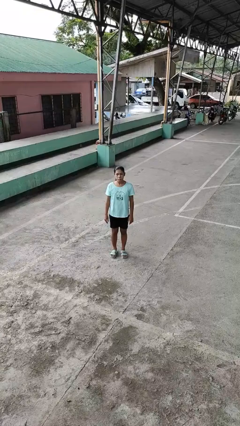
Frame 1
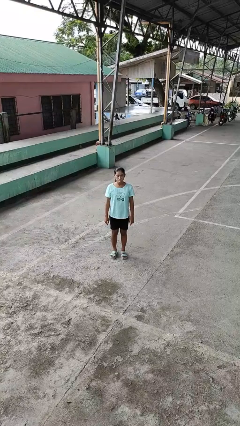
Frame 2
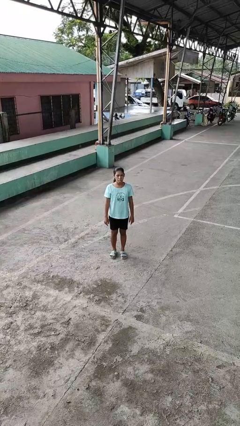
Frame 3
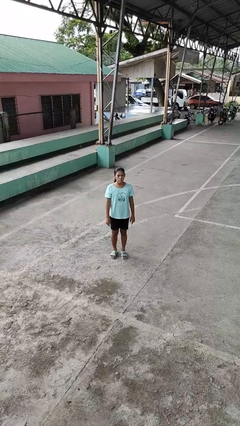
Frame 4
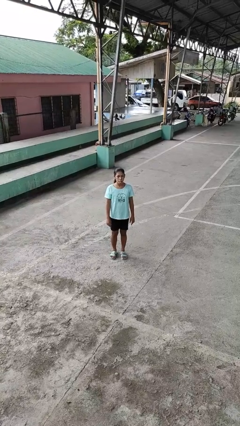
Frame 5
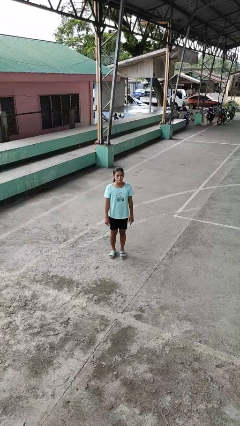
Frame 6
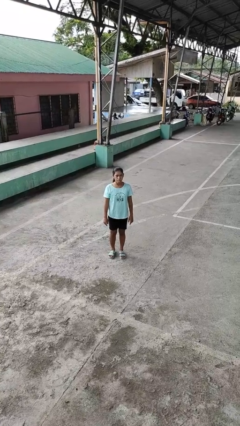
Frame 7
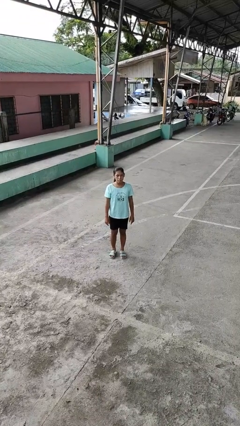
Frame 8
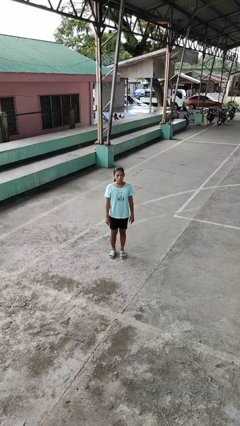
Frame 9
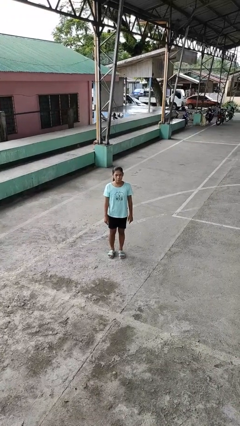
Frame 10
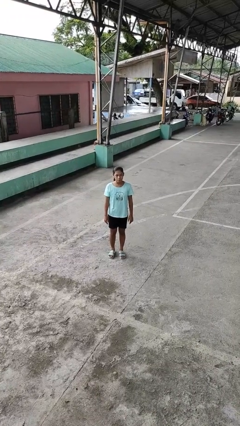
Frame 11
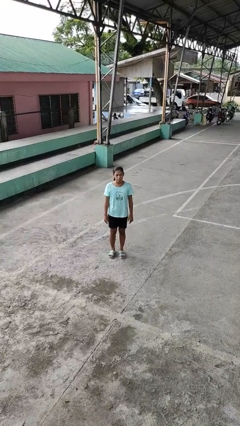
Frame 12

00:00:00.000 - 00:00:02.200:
person sticks out tongue

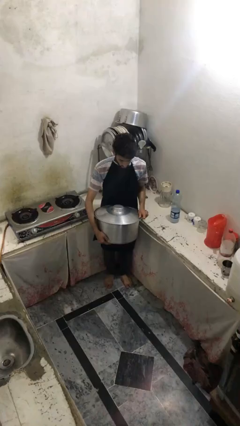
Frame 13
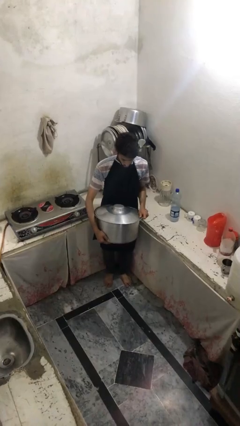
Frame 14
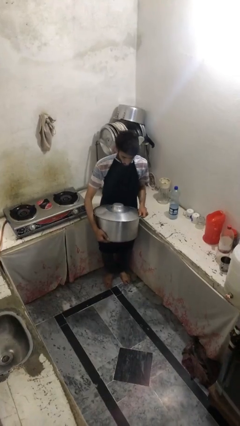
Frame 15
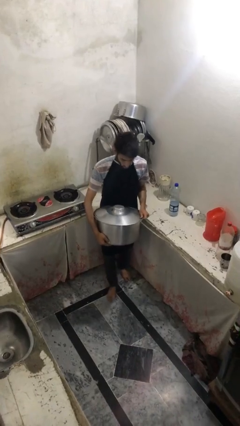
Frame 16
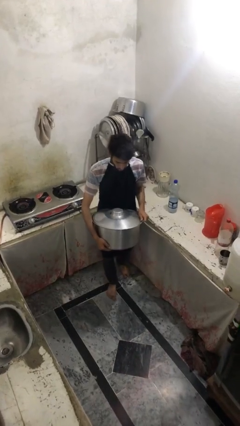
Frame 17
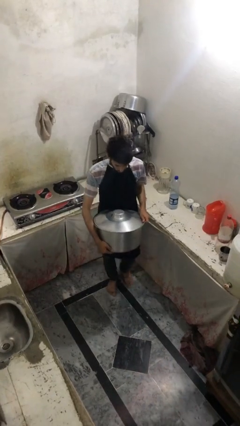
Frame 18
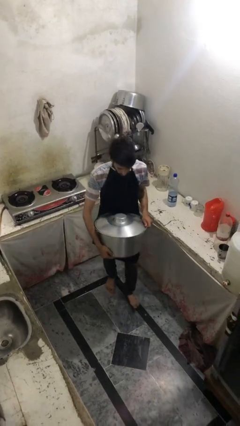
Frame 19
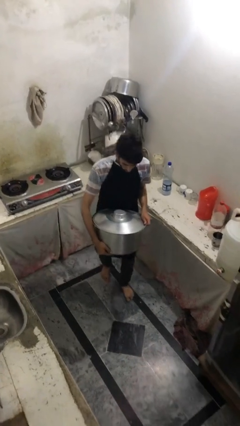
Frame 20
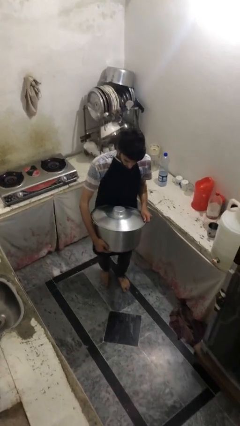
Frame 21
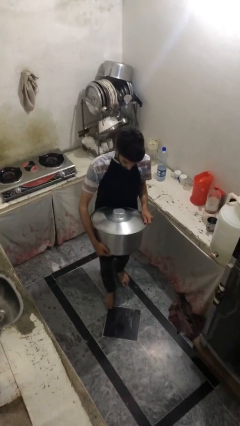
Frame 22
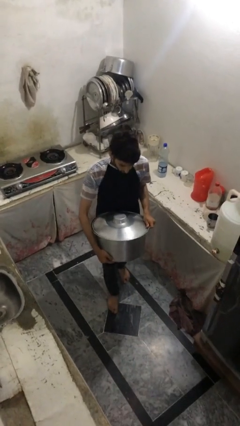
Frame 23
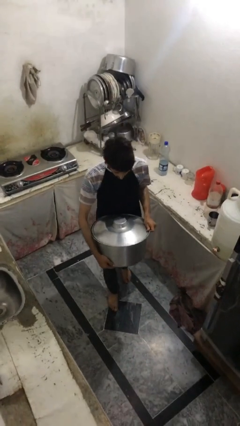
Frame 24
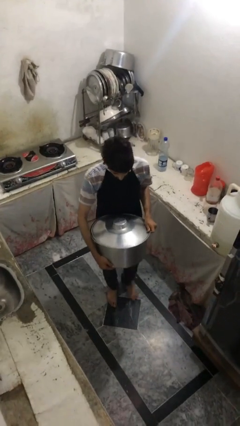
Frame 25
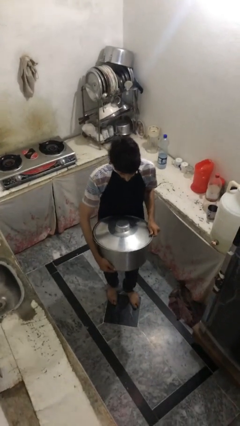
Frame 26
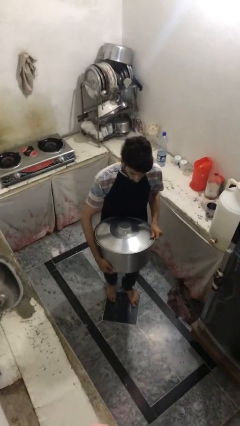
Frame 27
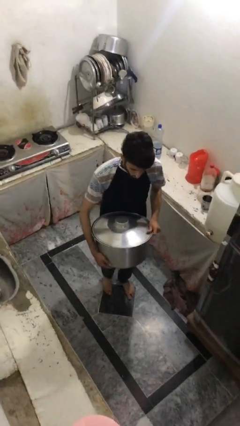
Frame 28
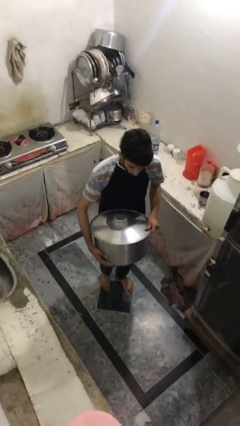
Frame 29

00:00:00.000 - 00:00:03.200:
person carries heavy object

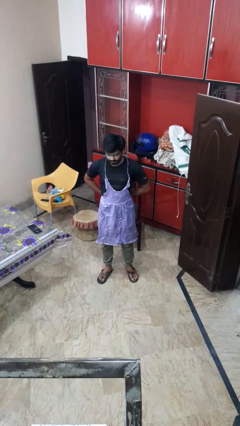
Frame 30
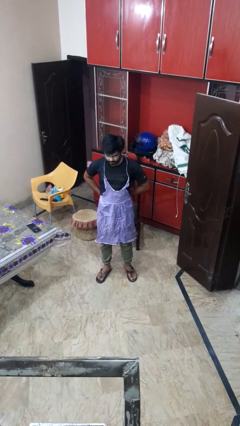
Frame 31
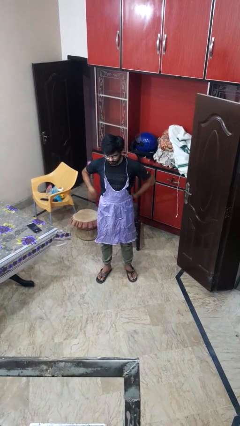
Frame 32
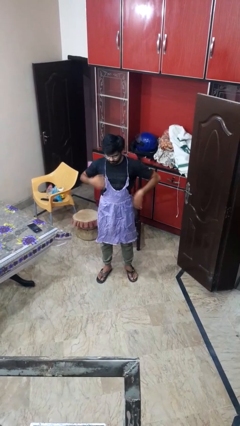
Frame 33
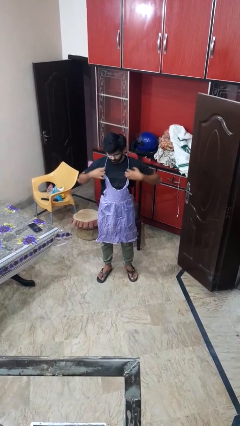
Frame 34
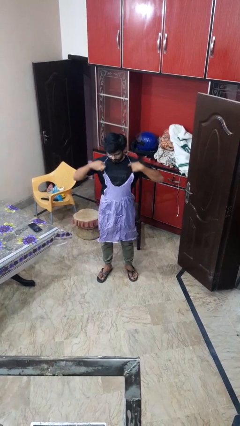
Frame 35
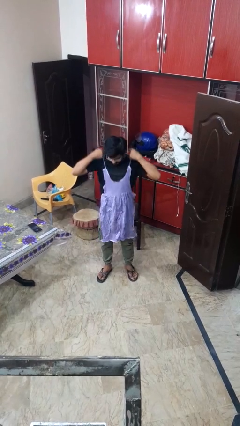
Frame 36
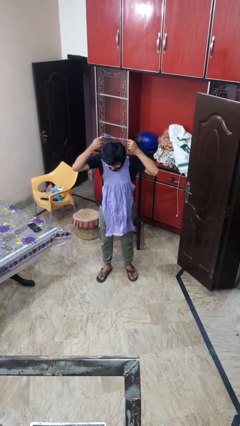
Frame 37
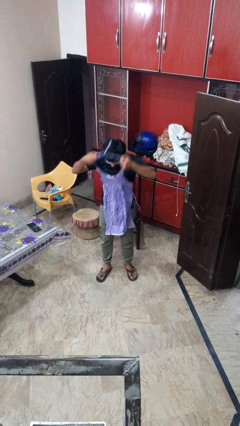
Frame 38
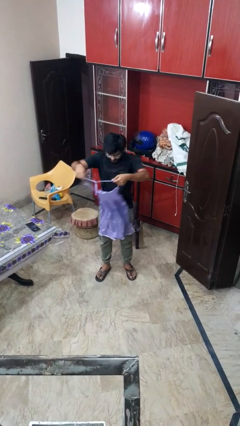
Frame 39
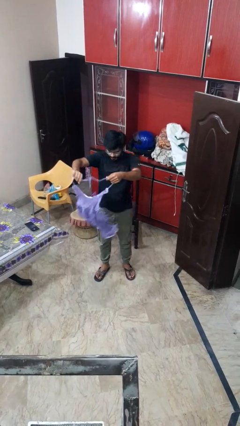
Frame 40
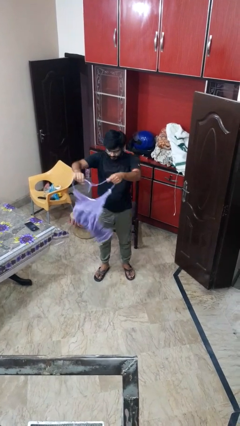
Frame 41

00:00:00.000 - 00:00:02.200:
person takes off apron

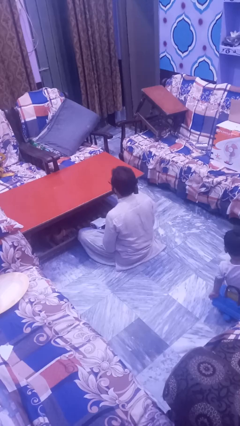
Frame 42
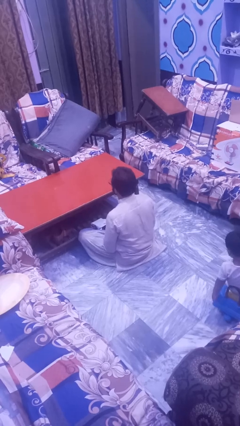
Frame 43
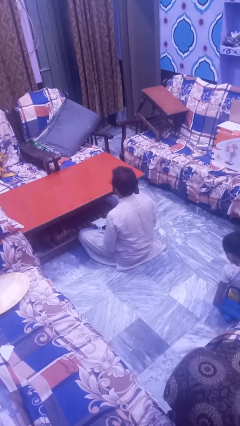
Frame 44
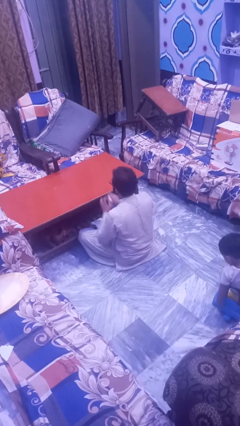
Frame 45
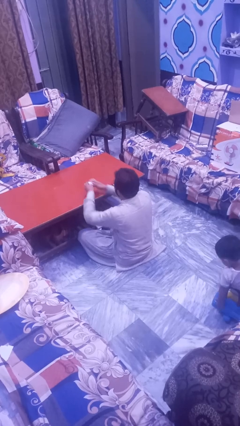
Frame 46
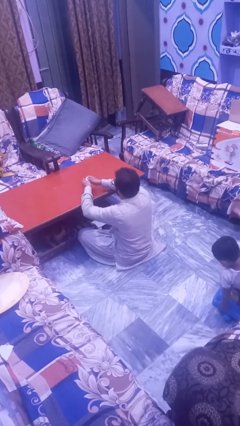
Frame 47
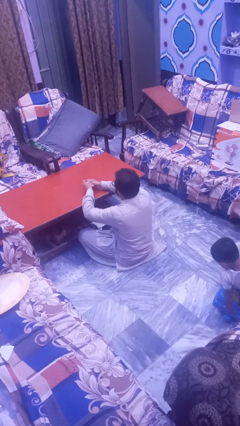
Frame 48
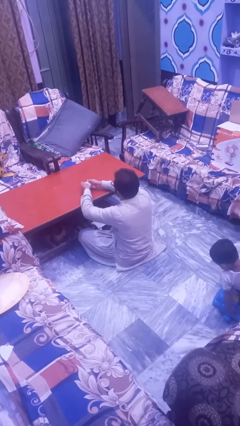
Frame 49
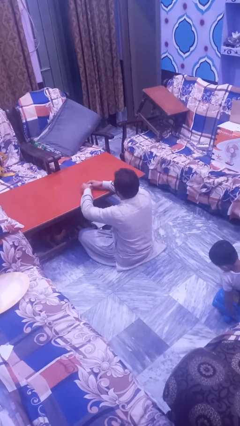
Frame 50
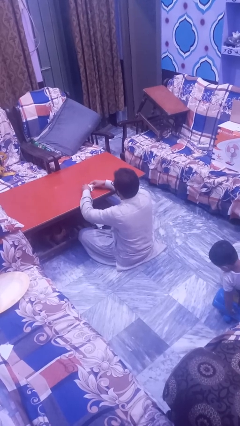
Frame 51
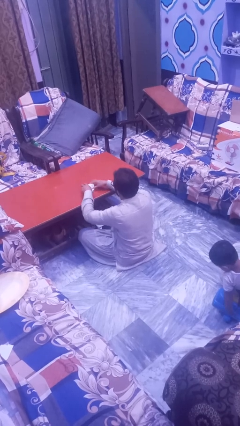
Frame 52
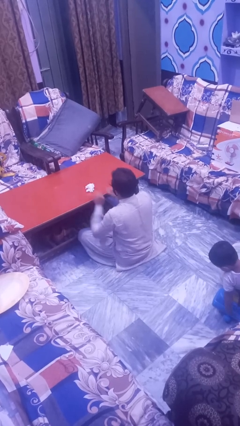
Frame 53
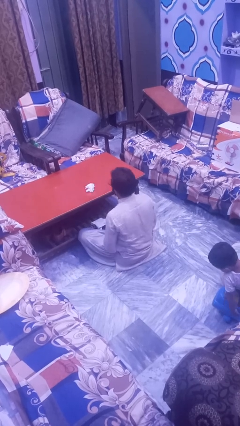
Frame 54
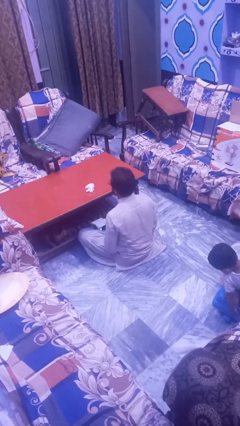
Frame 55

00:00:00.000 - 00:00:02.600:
person crumples paper

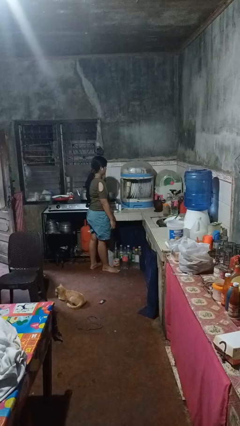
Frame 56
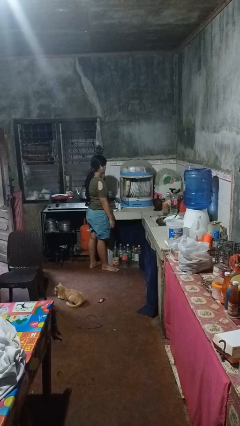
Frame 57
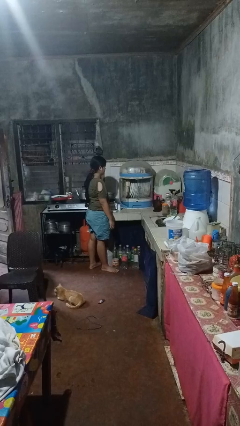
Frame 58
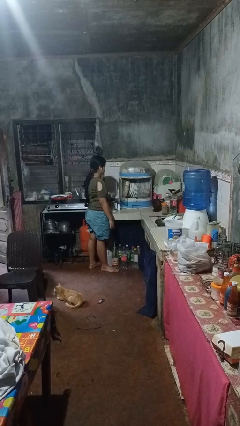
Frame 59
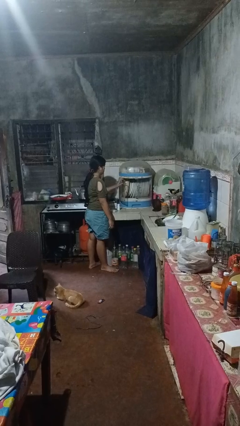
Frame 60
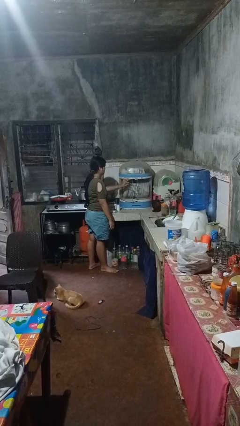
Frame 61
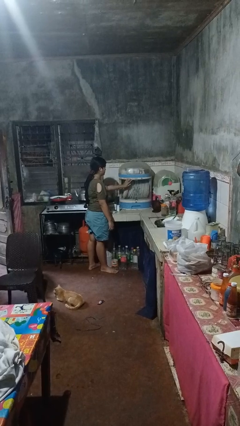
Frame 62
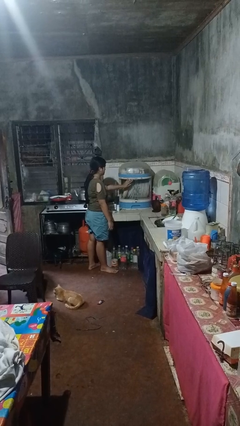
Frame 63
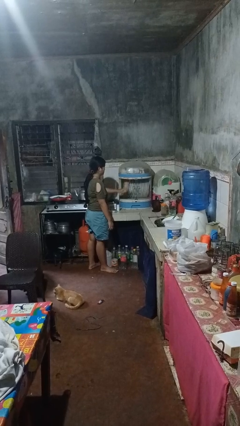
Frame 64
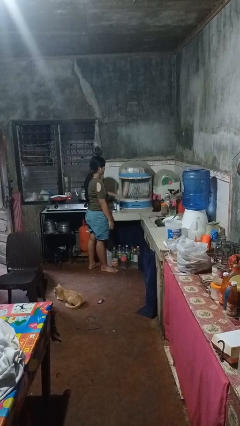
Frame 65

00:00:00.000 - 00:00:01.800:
person closes kitchen drawer

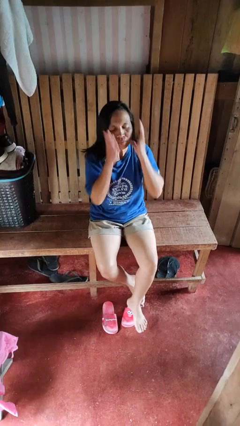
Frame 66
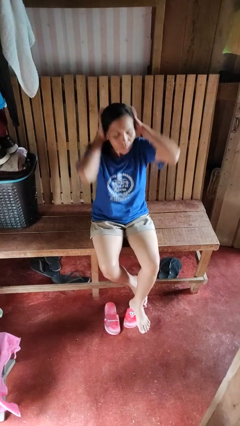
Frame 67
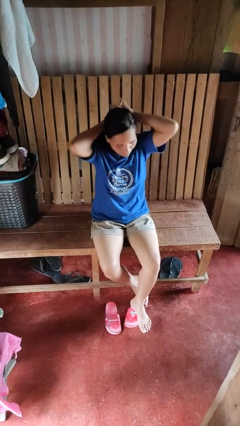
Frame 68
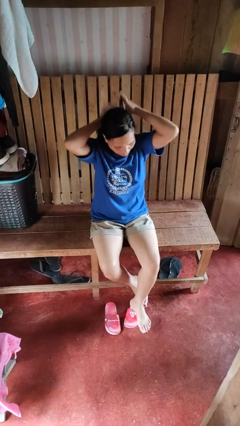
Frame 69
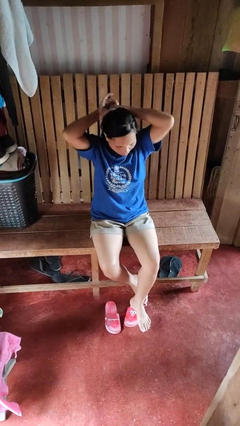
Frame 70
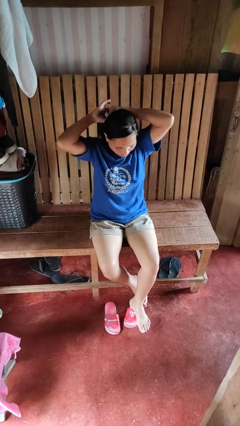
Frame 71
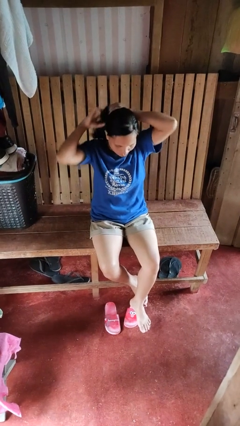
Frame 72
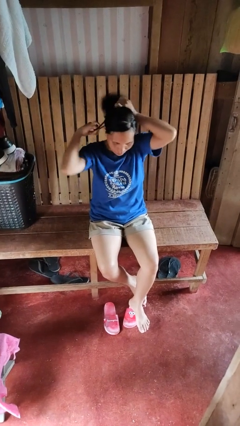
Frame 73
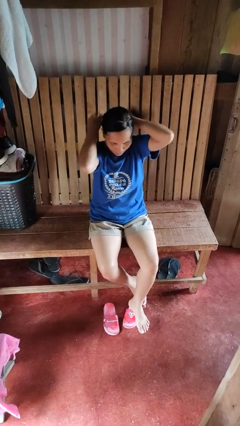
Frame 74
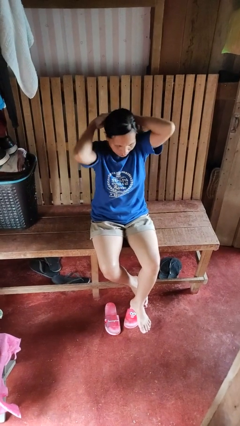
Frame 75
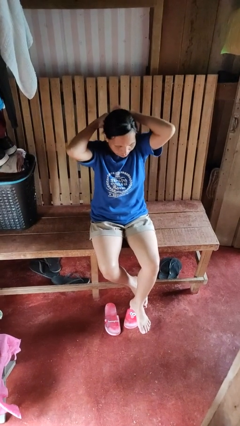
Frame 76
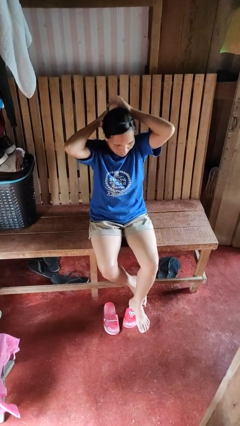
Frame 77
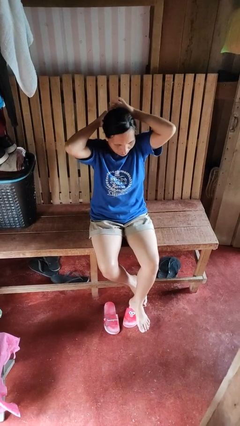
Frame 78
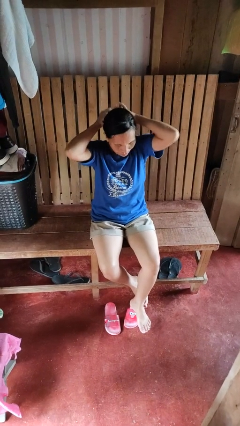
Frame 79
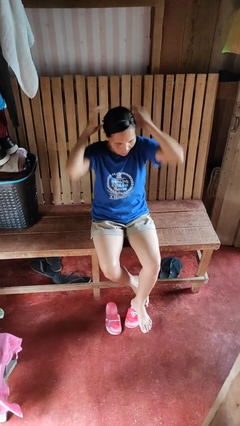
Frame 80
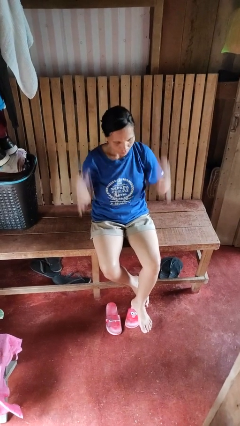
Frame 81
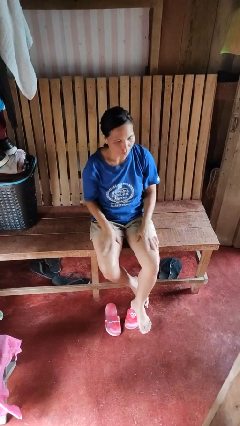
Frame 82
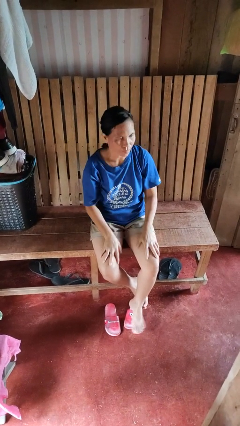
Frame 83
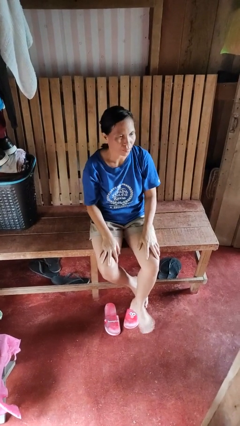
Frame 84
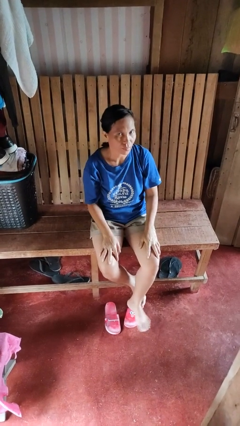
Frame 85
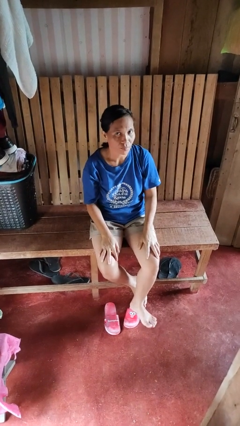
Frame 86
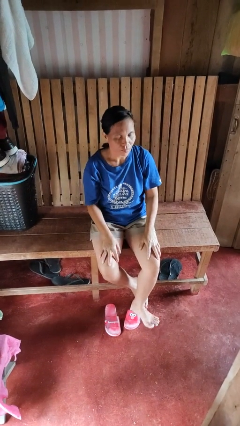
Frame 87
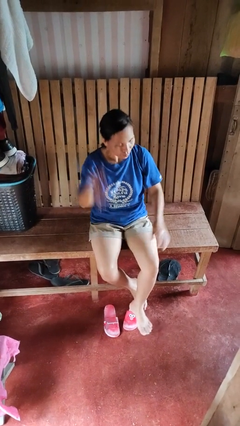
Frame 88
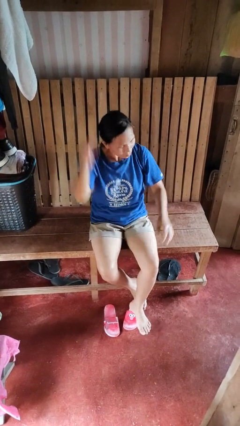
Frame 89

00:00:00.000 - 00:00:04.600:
person puts hair in ponytail

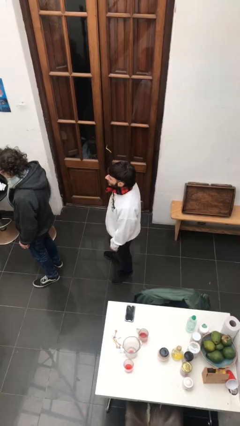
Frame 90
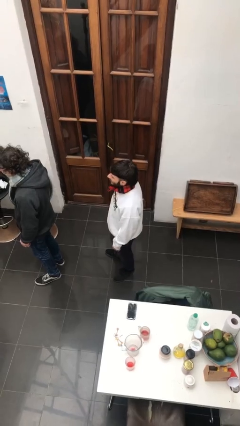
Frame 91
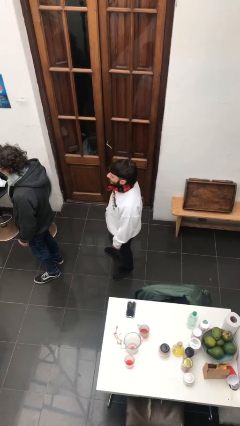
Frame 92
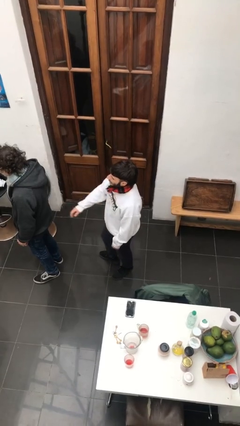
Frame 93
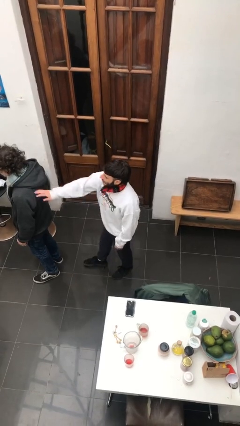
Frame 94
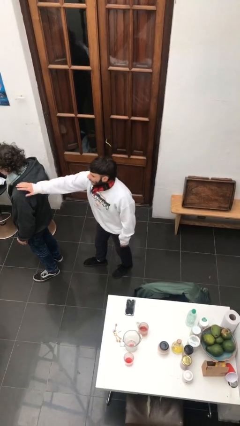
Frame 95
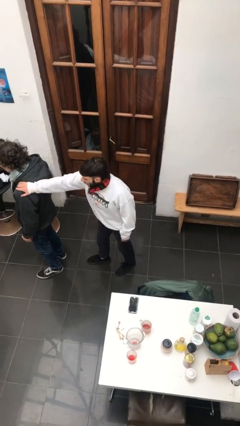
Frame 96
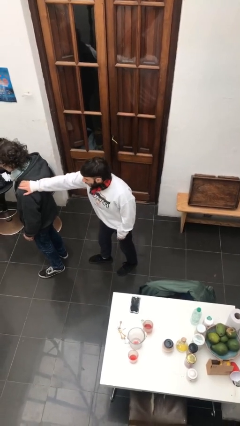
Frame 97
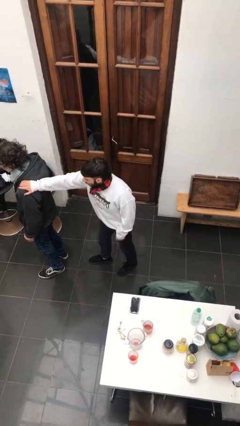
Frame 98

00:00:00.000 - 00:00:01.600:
person grabs person by shoulder
